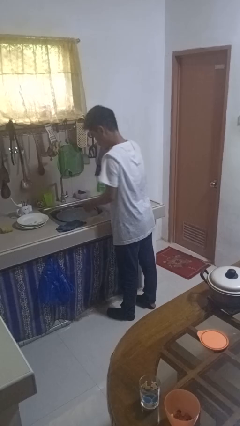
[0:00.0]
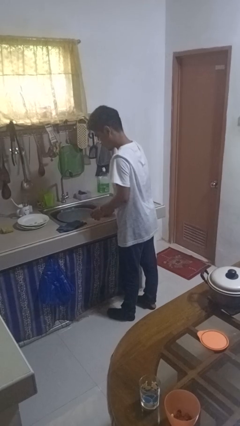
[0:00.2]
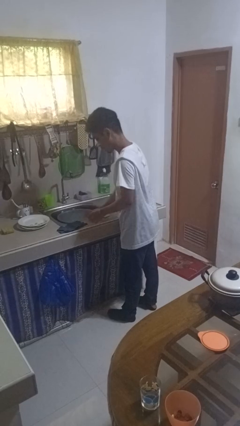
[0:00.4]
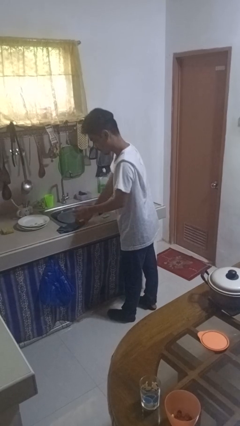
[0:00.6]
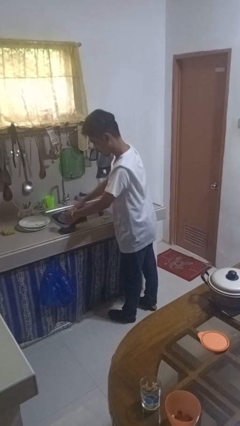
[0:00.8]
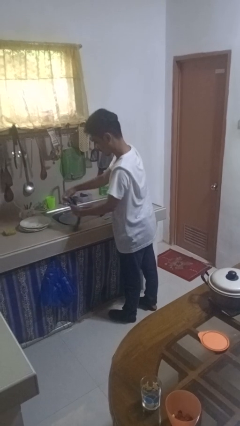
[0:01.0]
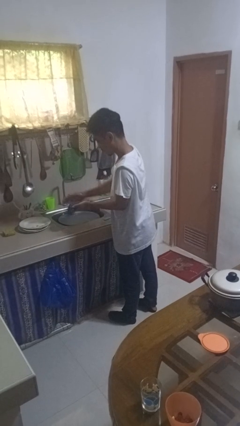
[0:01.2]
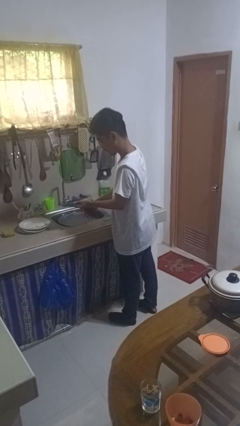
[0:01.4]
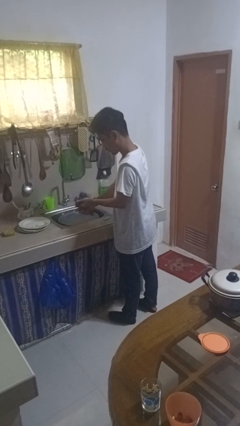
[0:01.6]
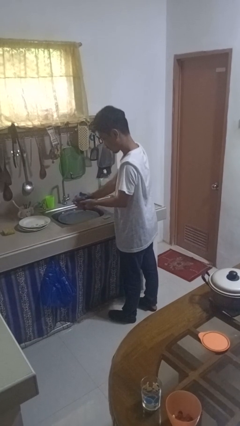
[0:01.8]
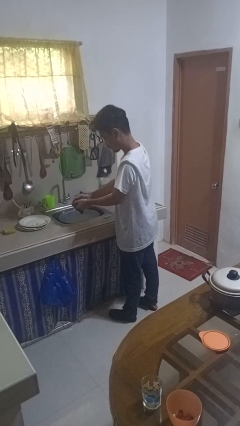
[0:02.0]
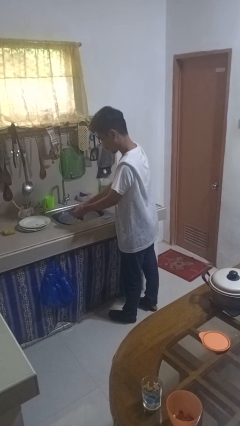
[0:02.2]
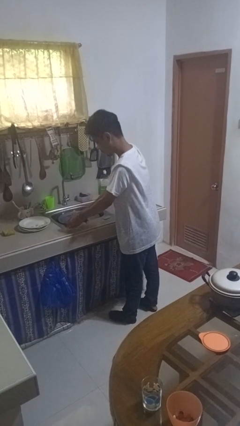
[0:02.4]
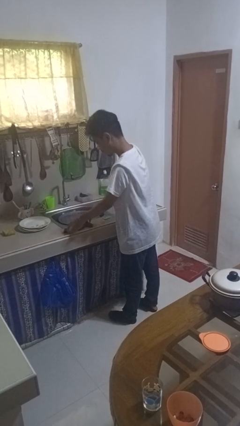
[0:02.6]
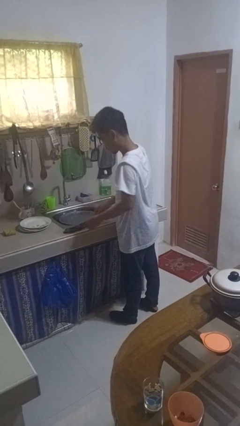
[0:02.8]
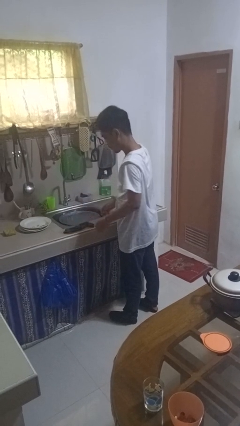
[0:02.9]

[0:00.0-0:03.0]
person dries hands with towel

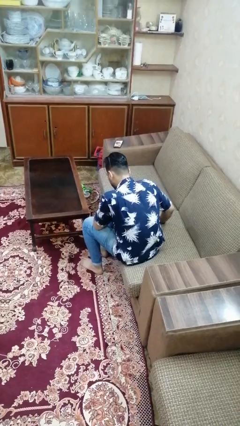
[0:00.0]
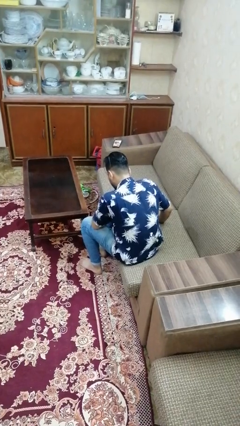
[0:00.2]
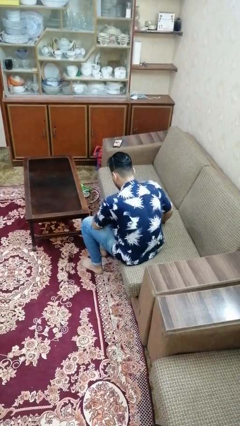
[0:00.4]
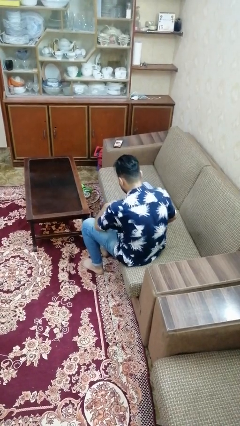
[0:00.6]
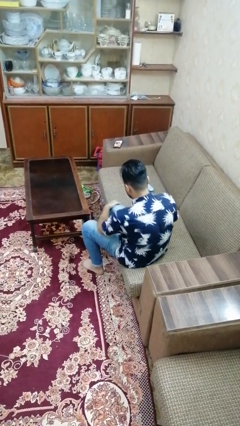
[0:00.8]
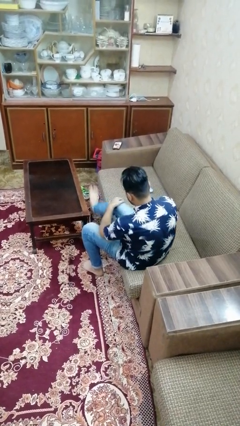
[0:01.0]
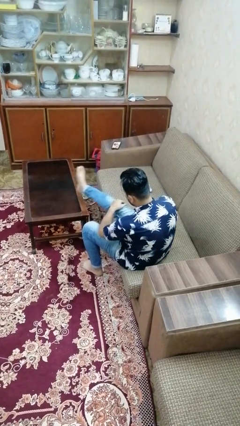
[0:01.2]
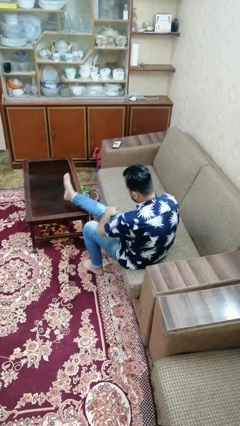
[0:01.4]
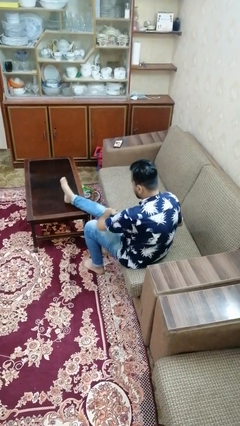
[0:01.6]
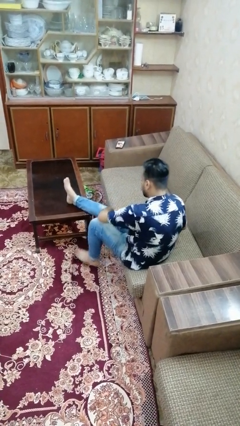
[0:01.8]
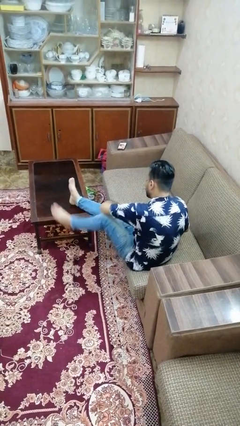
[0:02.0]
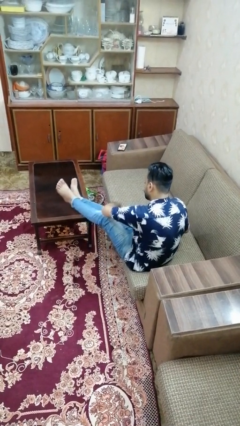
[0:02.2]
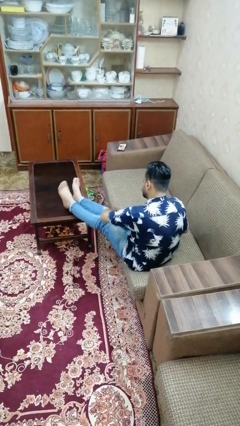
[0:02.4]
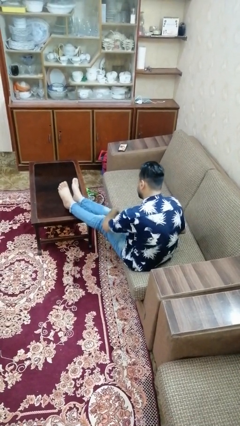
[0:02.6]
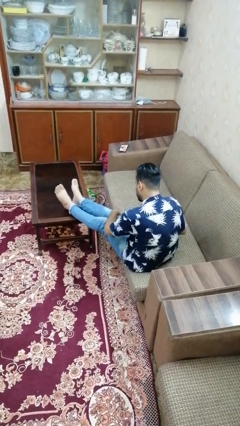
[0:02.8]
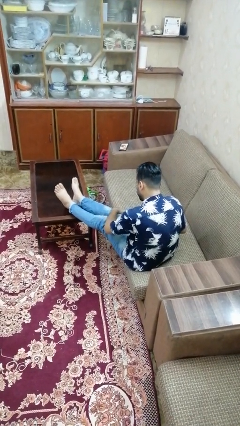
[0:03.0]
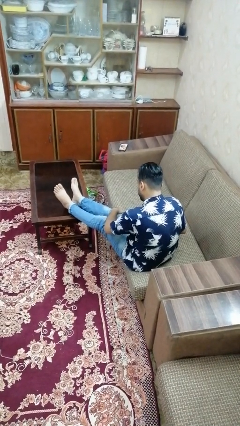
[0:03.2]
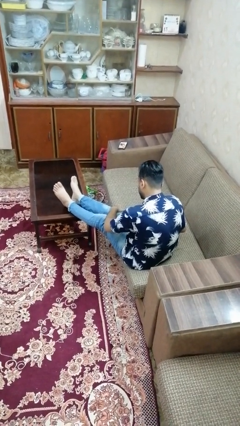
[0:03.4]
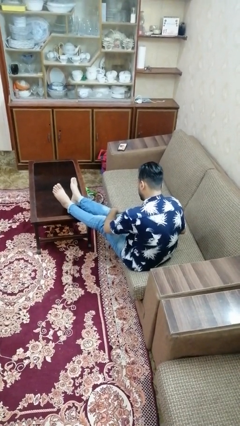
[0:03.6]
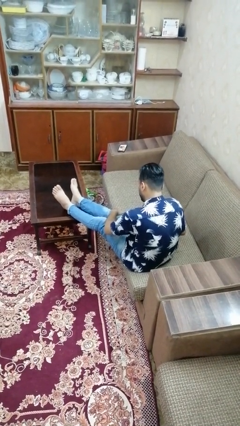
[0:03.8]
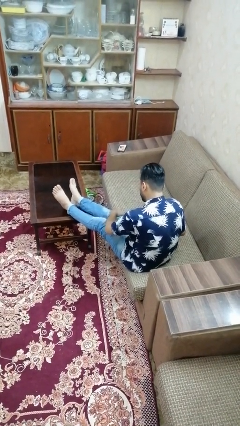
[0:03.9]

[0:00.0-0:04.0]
person puts feet up

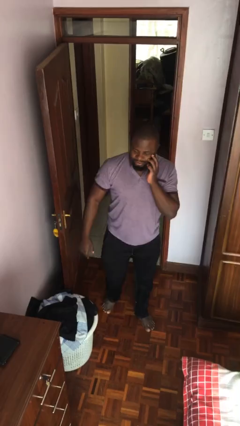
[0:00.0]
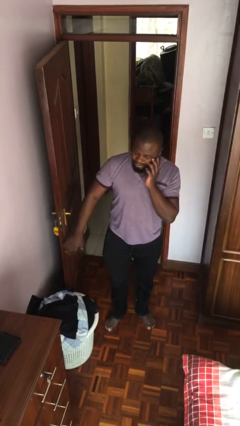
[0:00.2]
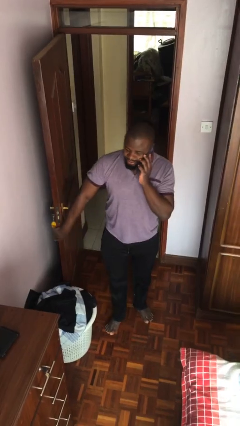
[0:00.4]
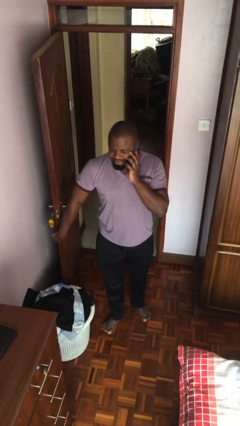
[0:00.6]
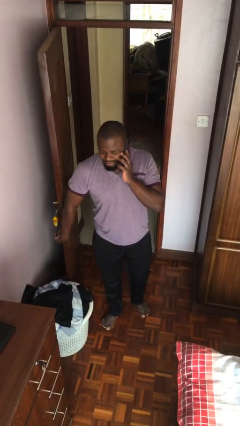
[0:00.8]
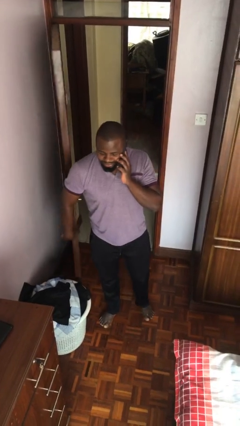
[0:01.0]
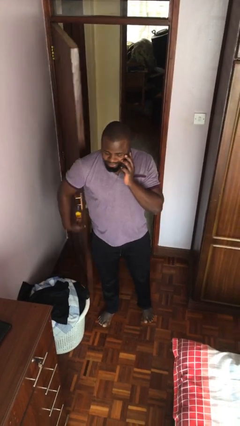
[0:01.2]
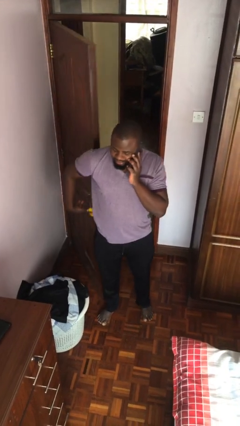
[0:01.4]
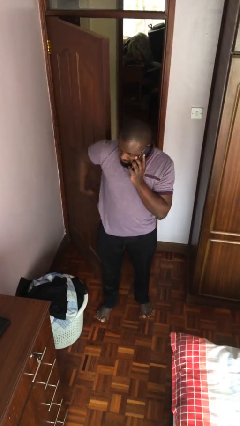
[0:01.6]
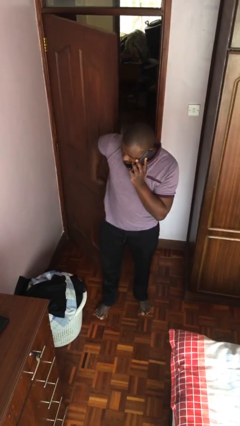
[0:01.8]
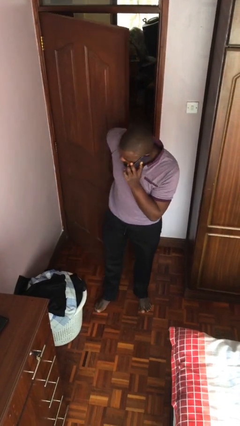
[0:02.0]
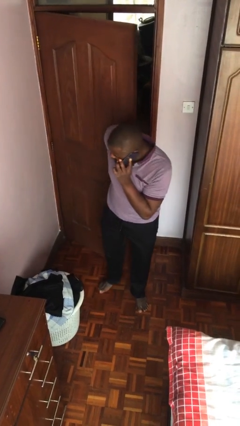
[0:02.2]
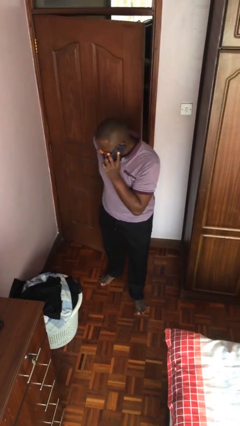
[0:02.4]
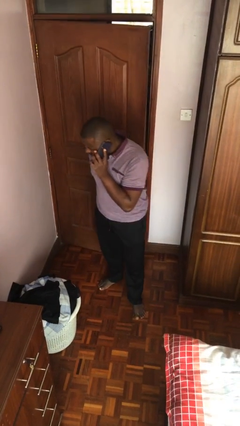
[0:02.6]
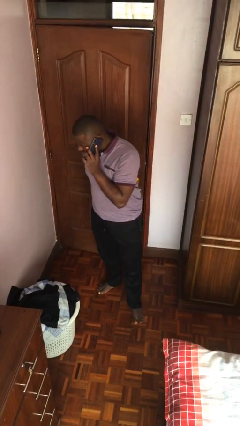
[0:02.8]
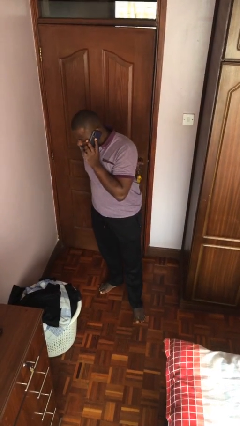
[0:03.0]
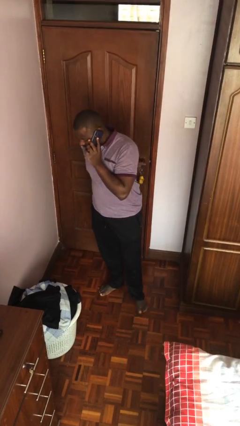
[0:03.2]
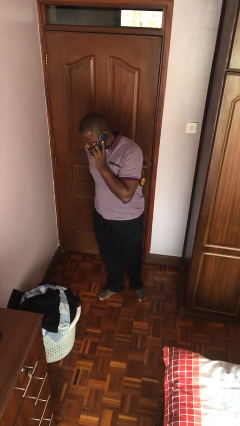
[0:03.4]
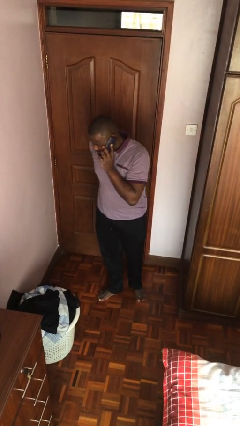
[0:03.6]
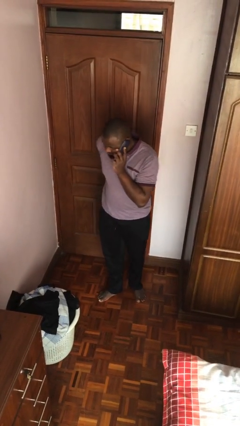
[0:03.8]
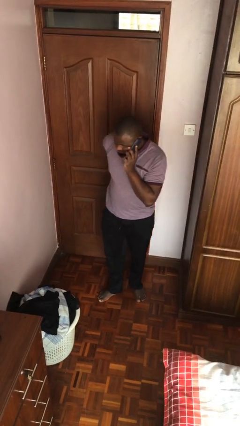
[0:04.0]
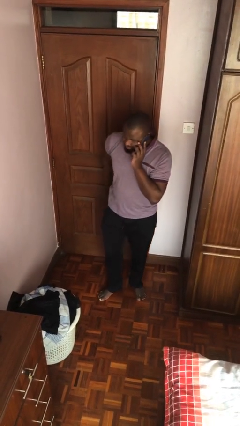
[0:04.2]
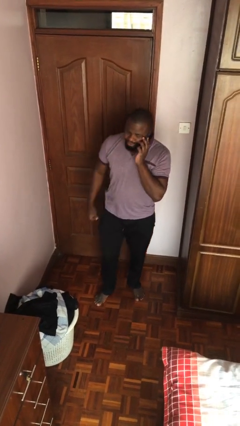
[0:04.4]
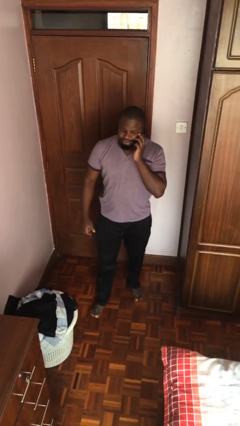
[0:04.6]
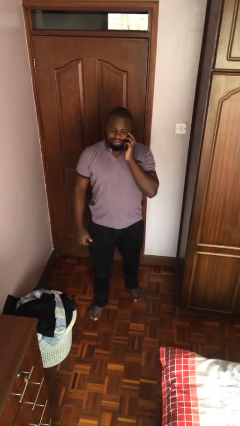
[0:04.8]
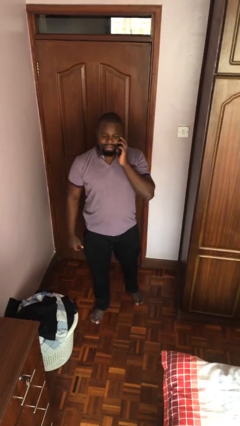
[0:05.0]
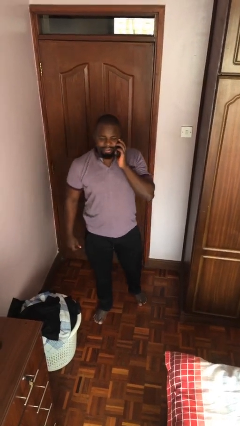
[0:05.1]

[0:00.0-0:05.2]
person closes facility door

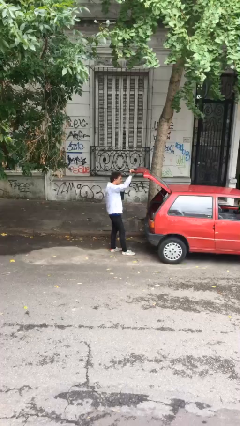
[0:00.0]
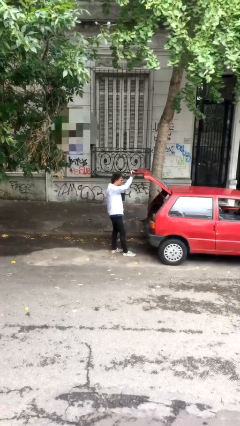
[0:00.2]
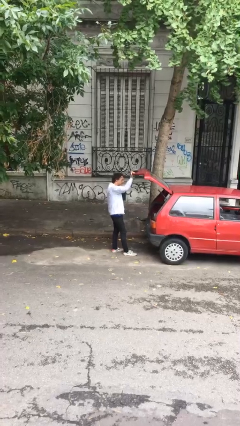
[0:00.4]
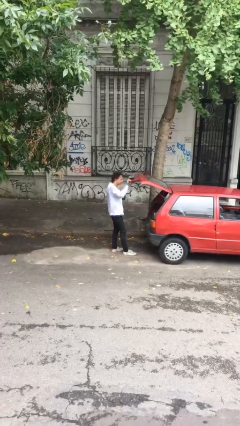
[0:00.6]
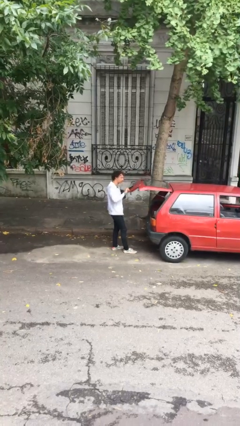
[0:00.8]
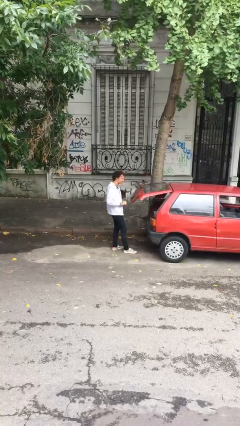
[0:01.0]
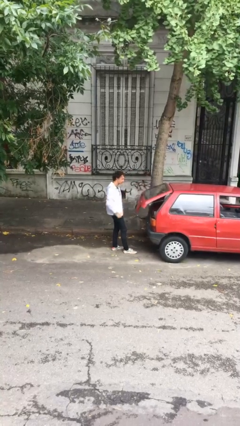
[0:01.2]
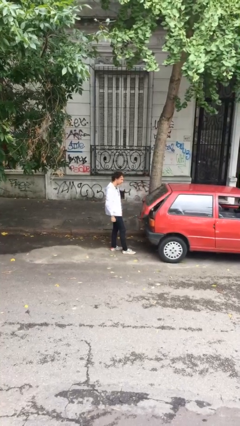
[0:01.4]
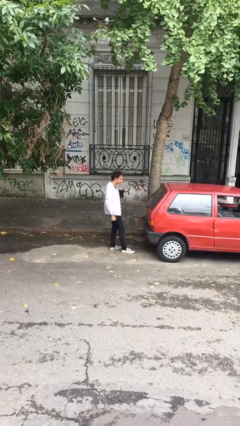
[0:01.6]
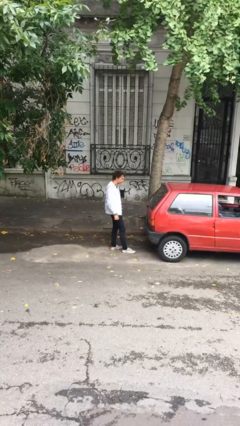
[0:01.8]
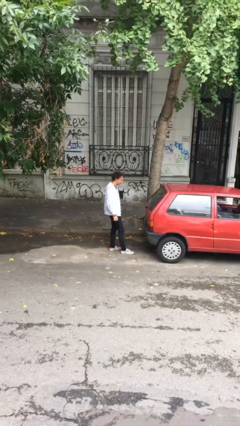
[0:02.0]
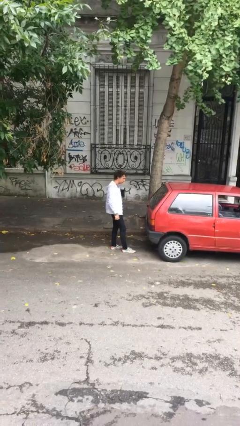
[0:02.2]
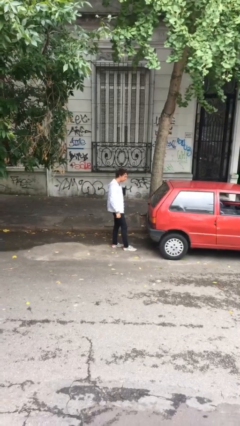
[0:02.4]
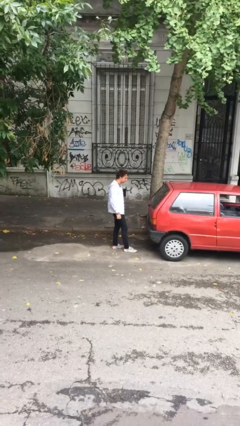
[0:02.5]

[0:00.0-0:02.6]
person closes car trunk

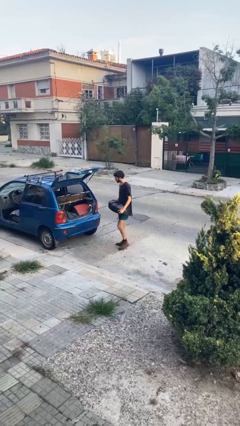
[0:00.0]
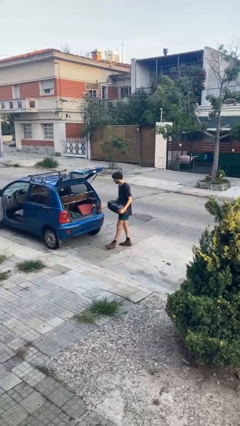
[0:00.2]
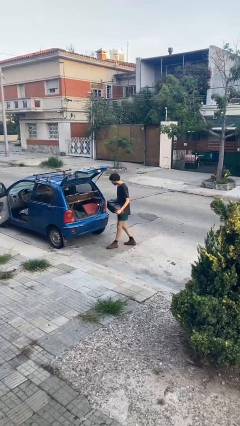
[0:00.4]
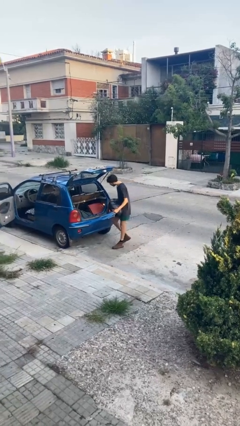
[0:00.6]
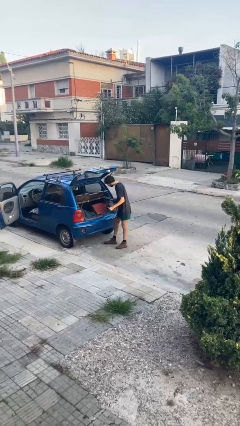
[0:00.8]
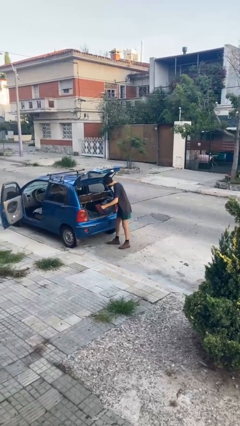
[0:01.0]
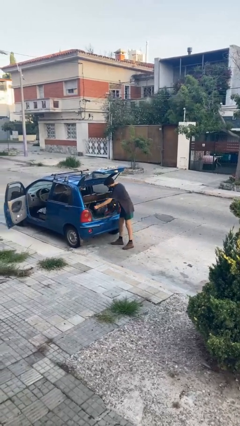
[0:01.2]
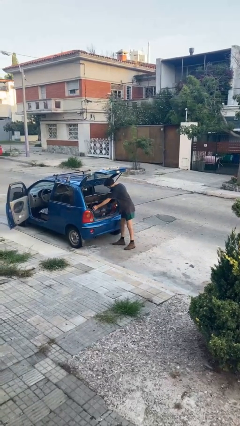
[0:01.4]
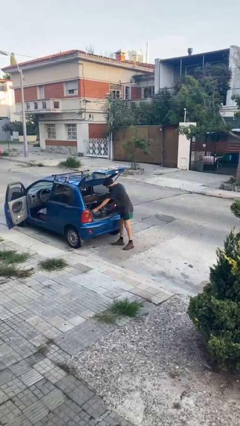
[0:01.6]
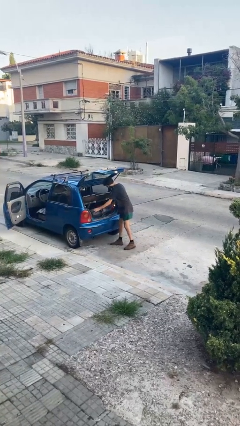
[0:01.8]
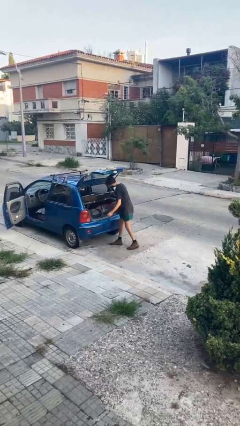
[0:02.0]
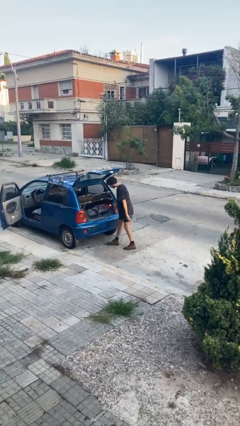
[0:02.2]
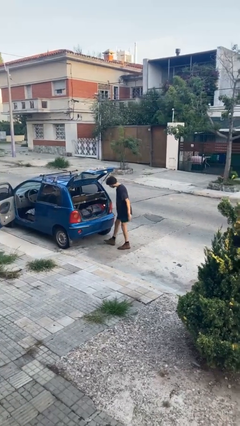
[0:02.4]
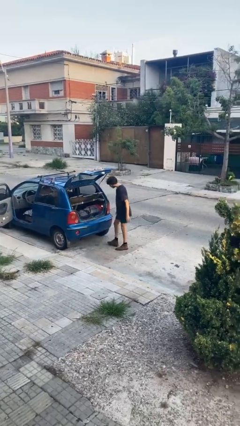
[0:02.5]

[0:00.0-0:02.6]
person loads car

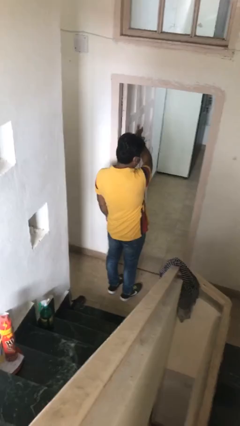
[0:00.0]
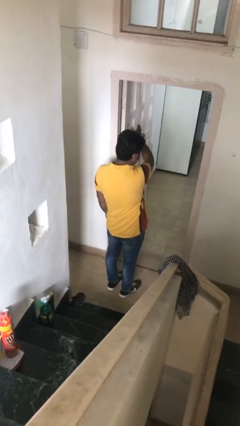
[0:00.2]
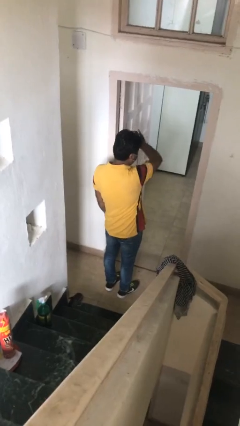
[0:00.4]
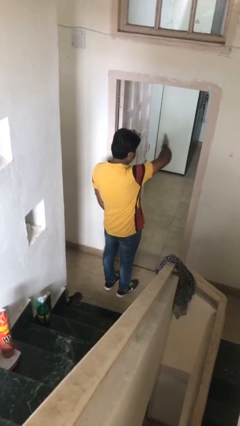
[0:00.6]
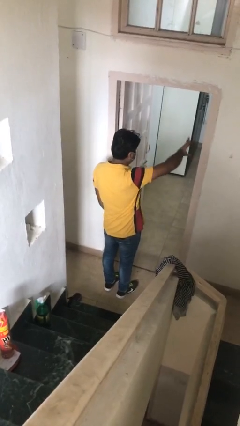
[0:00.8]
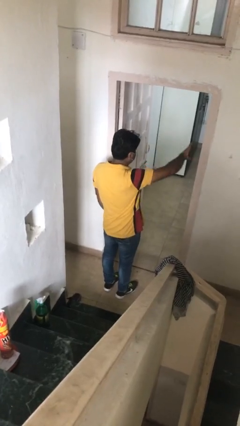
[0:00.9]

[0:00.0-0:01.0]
person gestures swipe right
